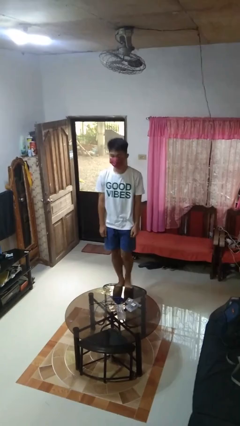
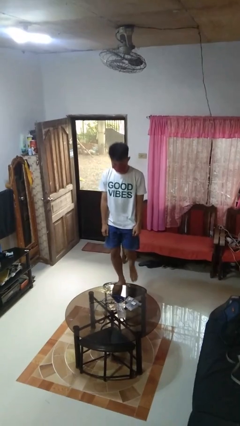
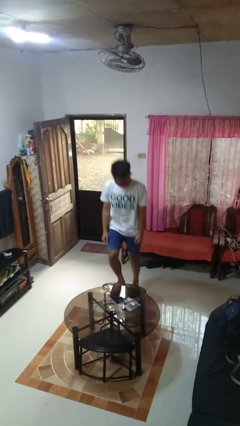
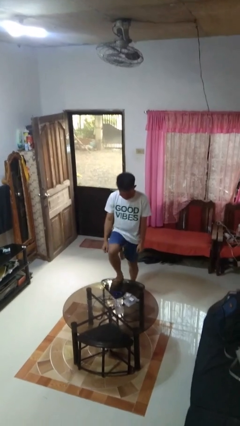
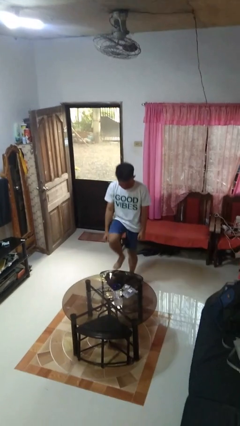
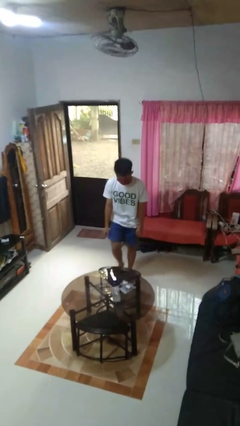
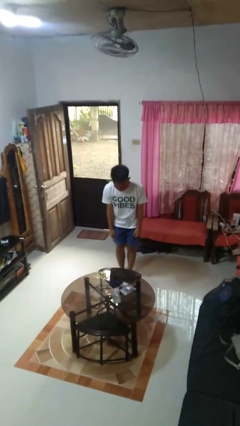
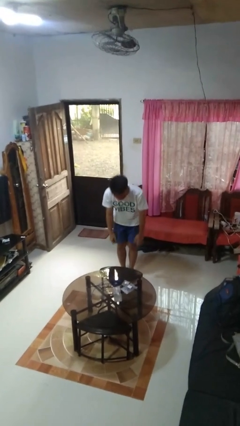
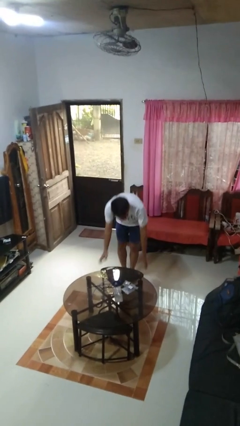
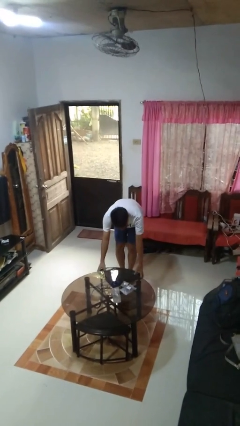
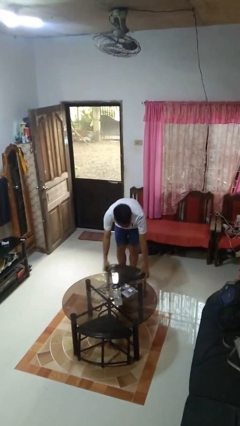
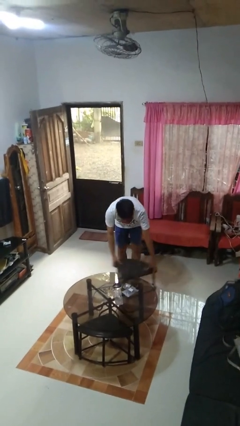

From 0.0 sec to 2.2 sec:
person climbs off chair

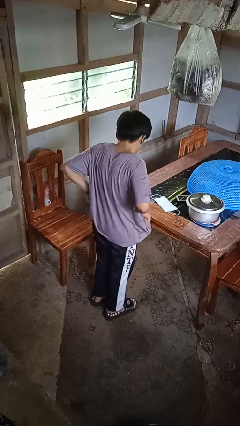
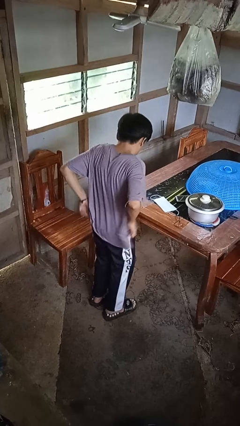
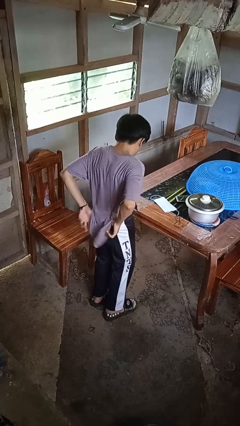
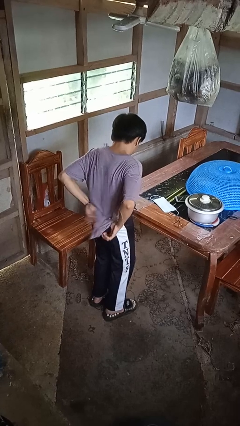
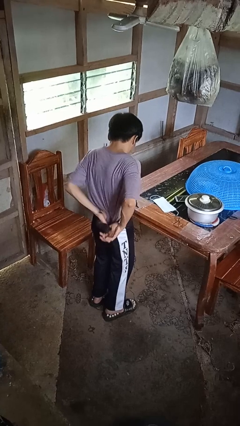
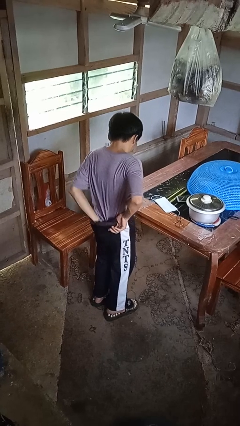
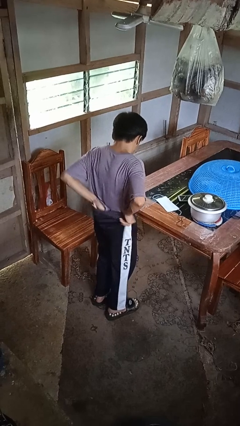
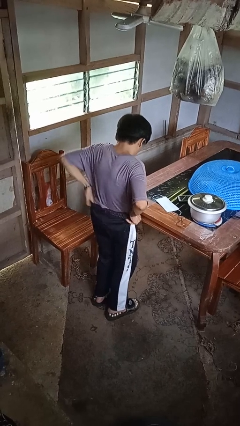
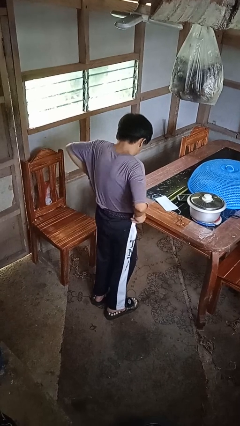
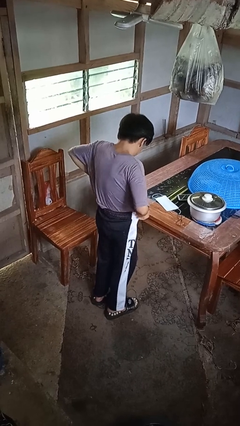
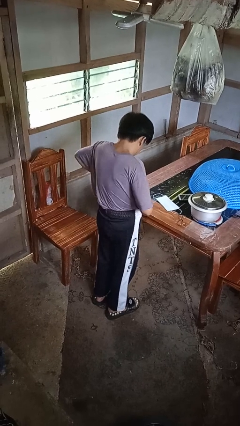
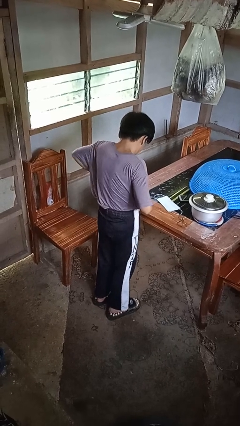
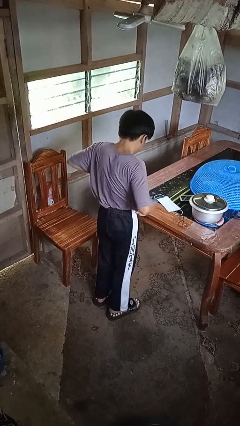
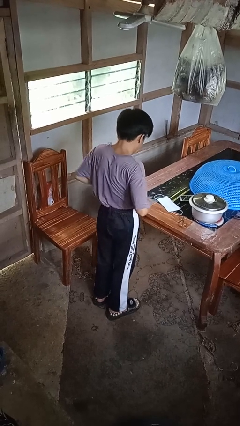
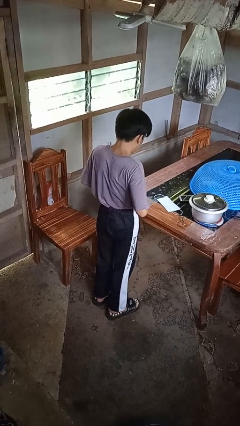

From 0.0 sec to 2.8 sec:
person tucks in shirt

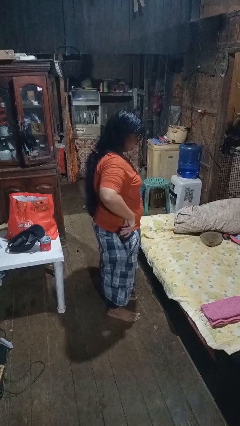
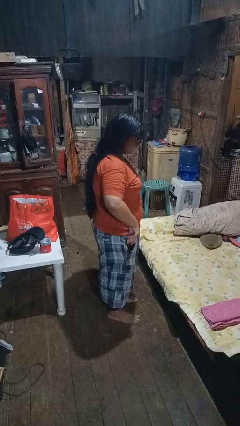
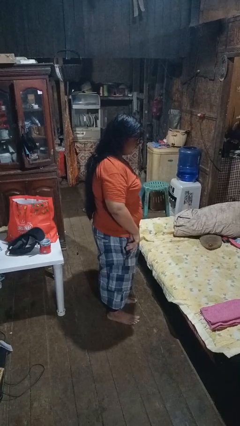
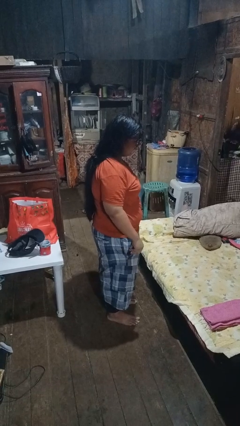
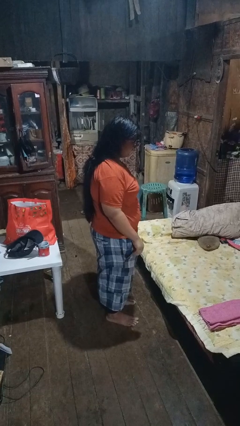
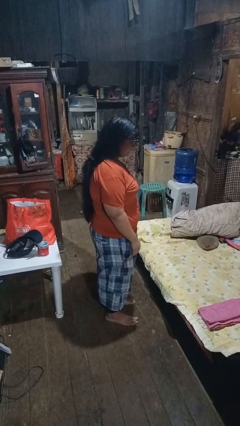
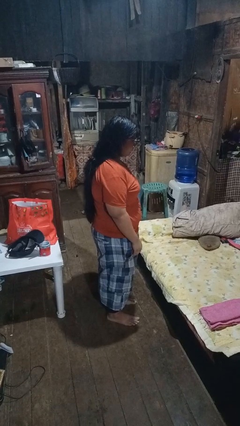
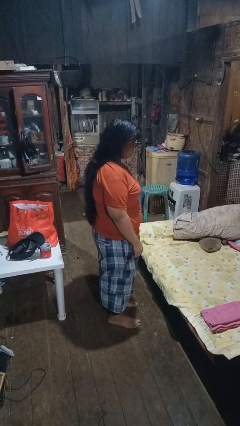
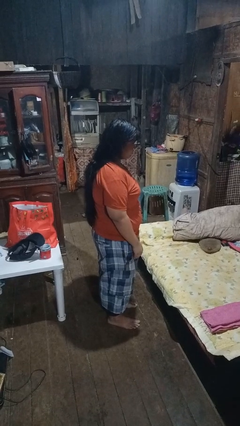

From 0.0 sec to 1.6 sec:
person puts phone into pocket

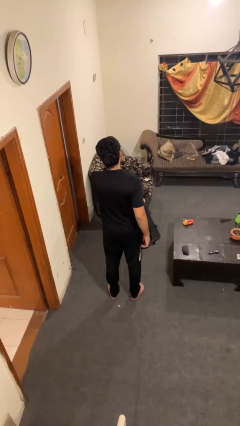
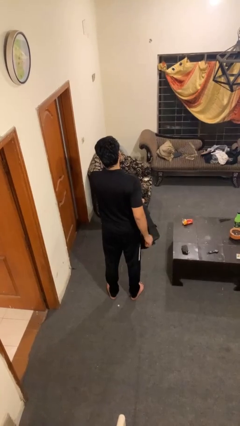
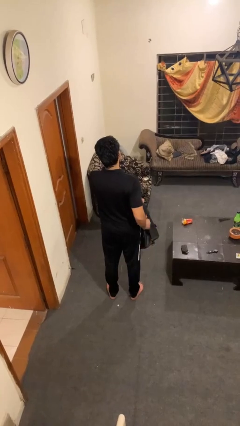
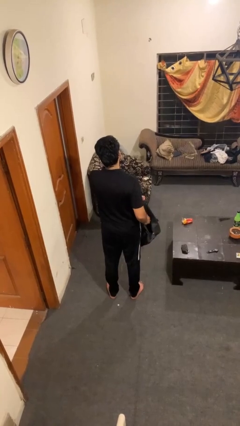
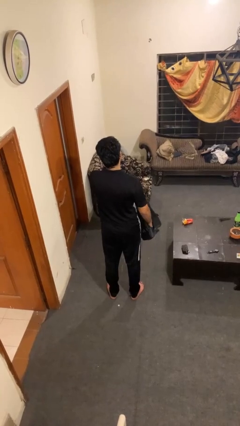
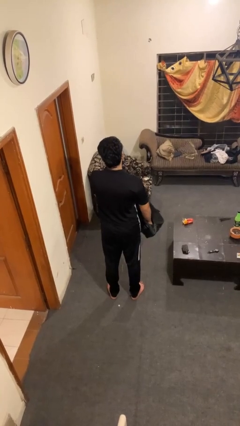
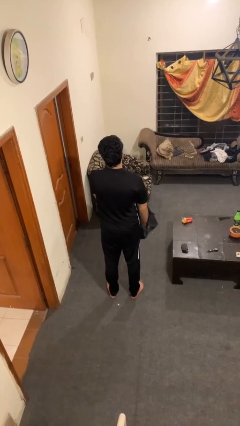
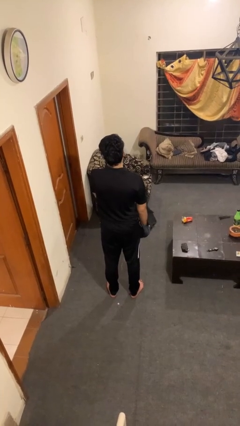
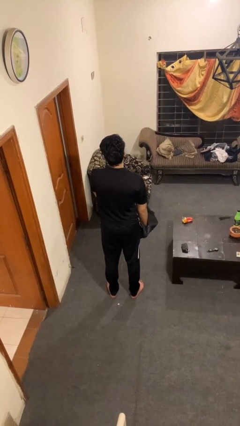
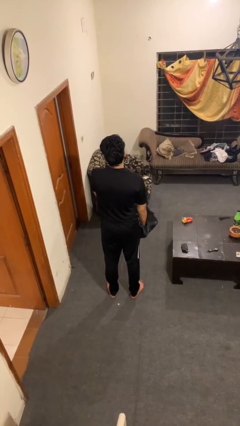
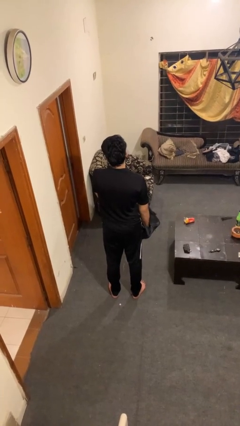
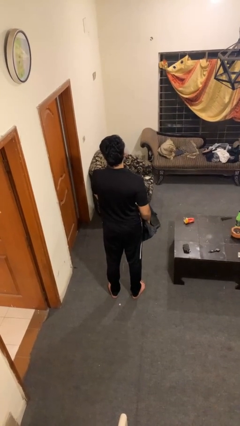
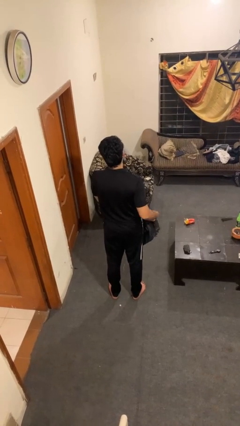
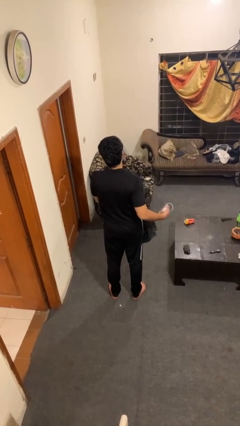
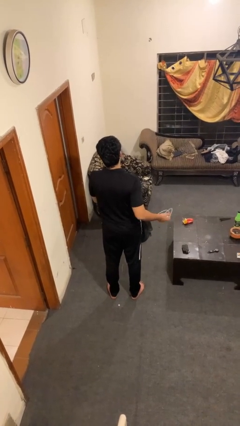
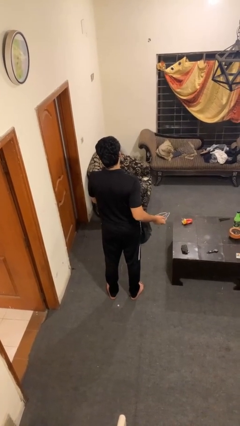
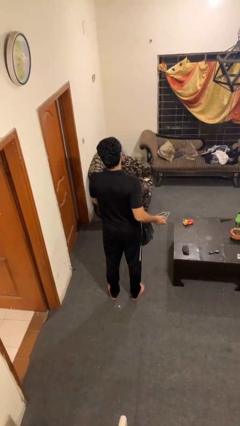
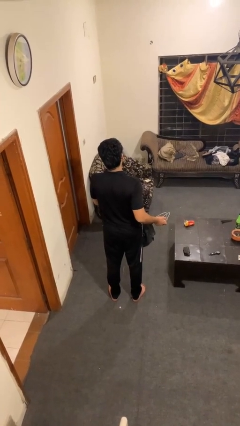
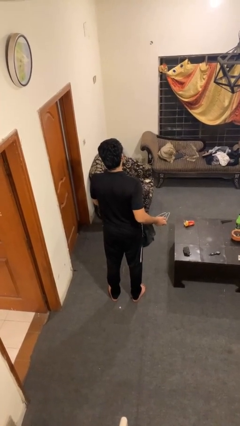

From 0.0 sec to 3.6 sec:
person takes object from bag

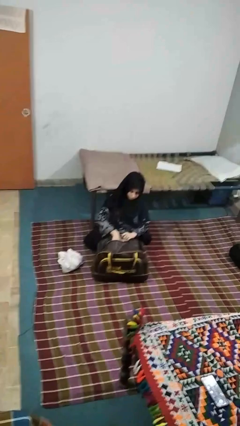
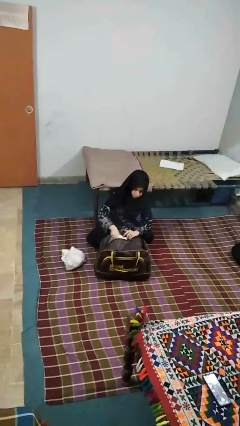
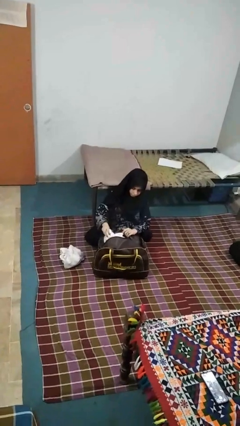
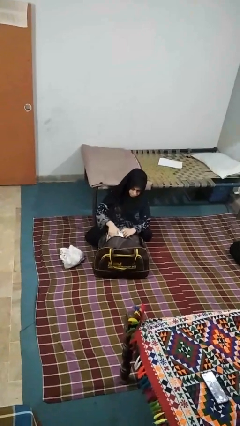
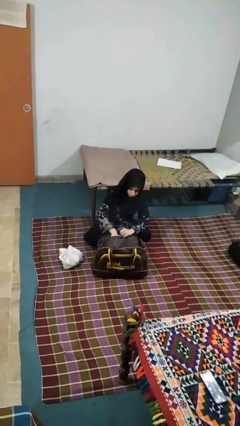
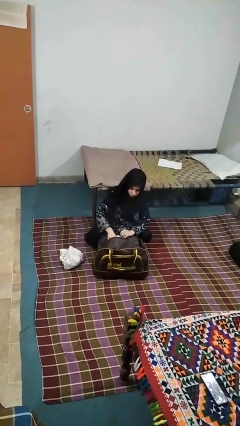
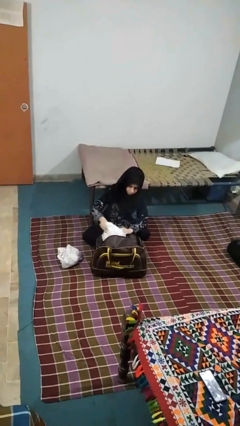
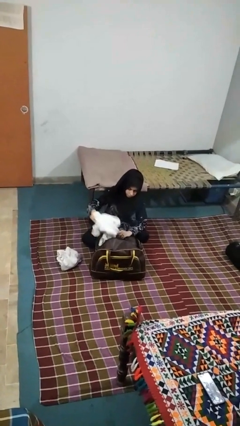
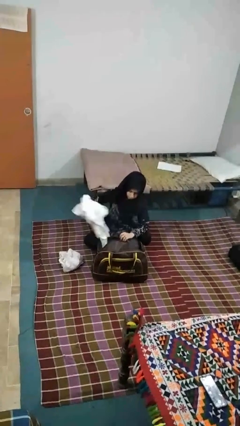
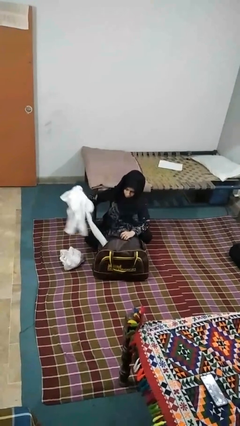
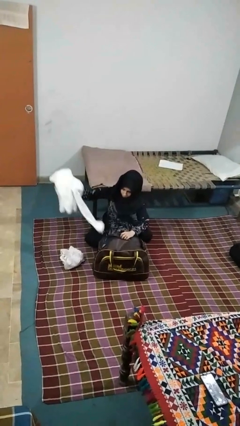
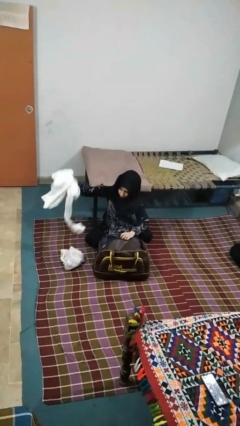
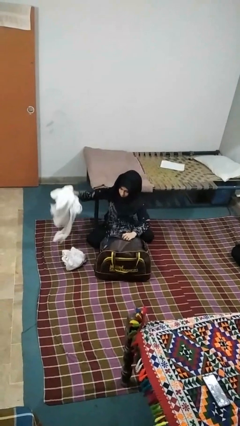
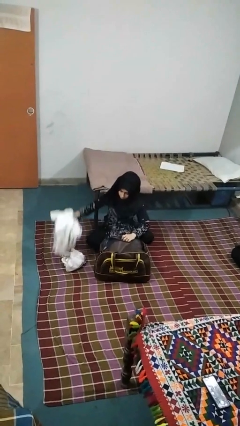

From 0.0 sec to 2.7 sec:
person unloads clothes from suitcase

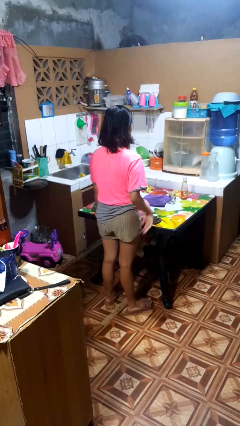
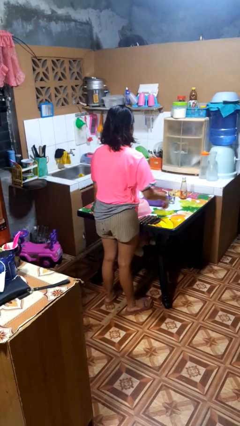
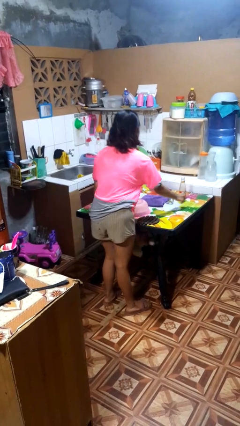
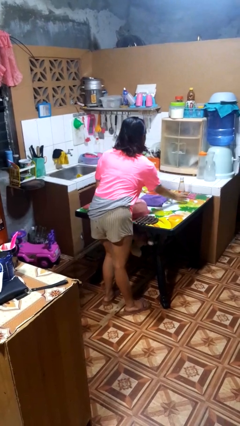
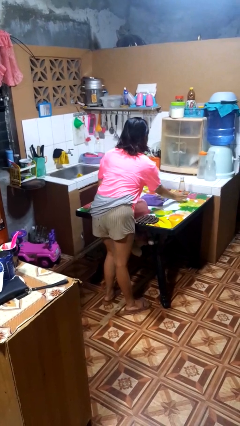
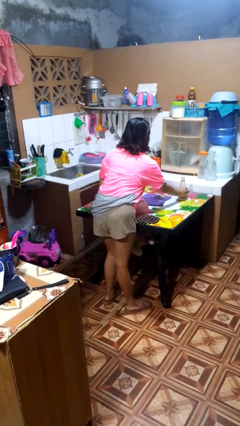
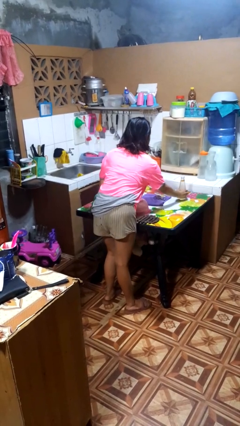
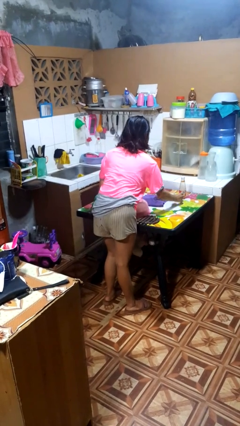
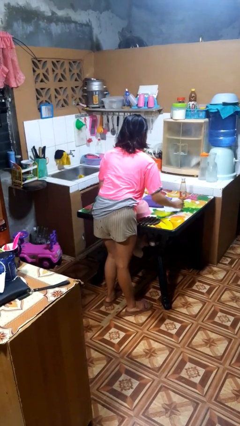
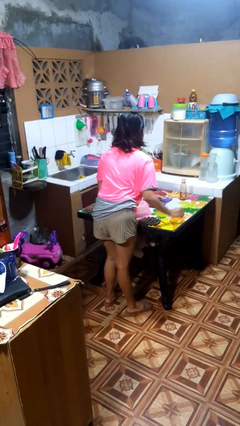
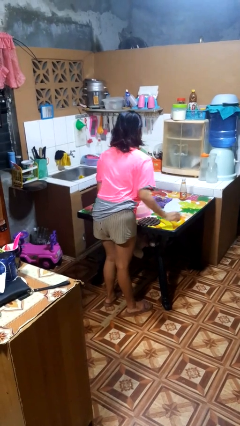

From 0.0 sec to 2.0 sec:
person knocks over glass

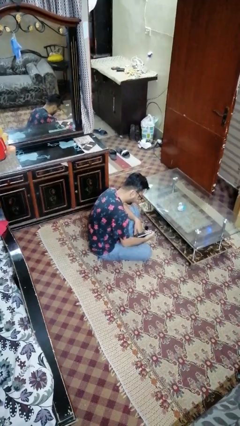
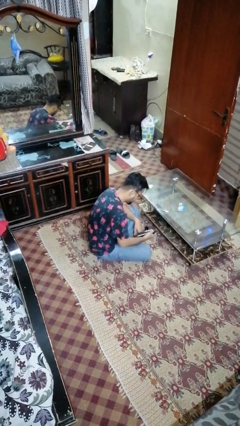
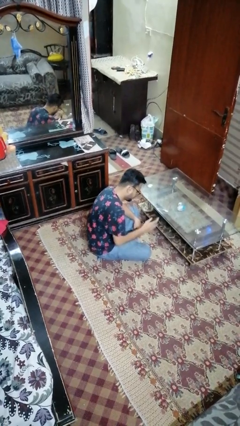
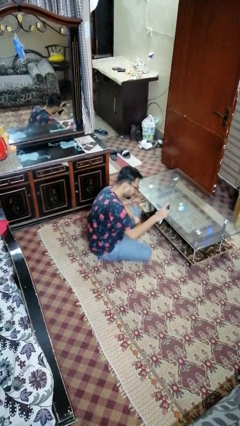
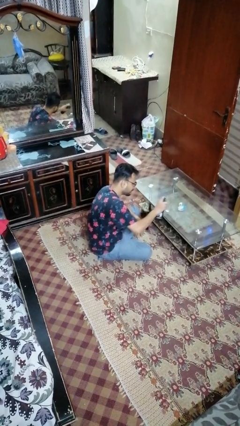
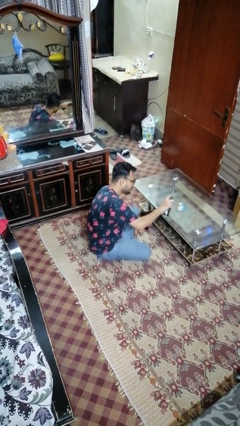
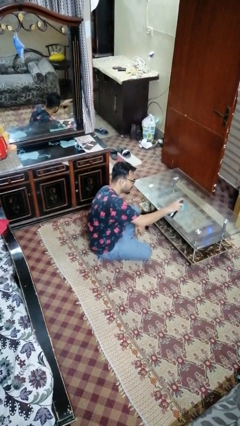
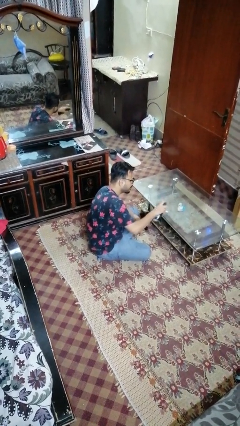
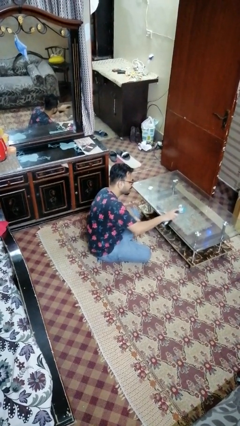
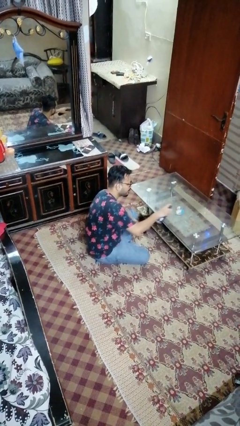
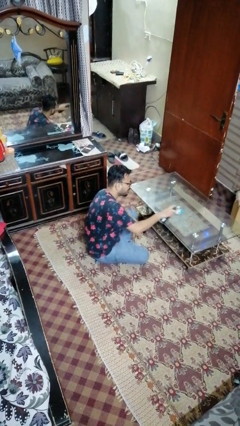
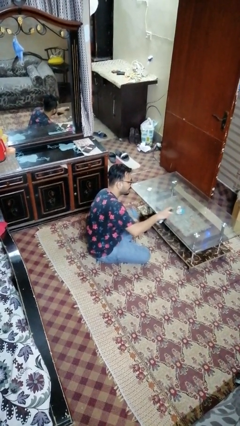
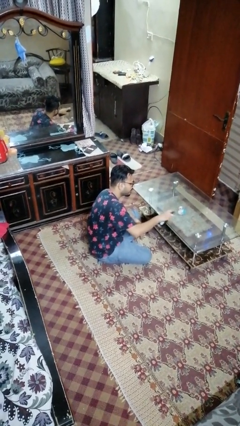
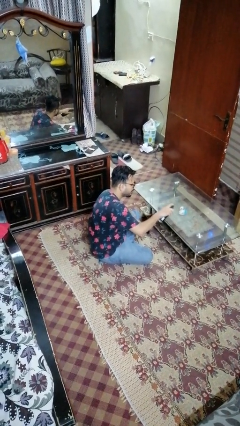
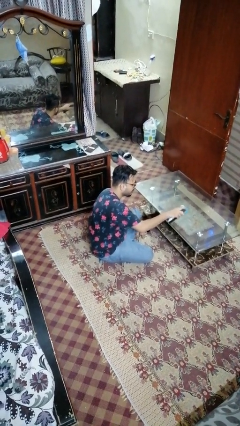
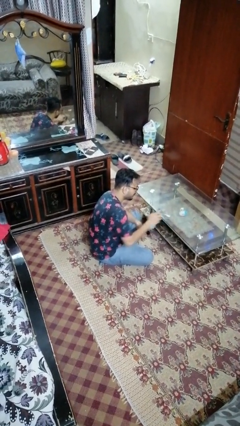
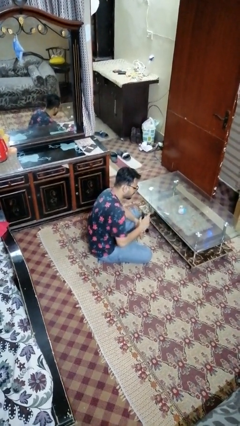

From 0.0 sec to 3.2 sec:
person sprays from bottle
